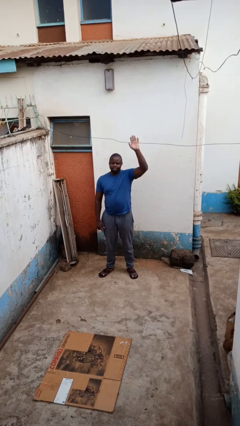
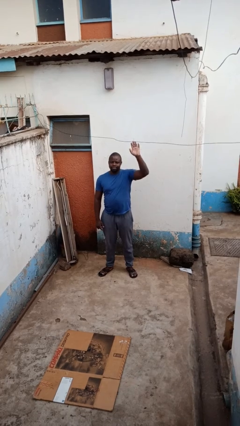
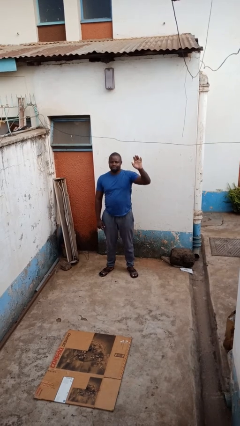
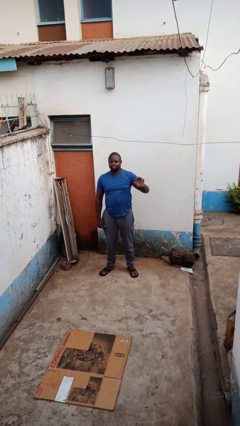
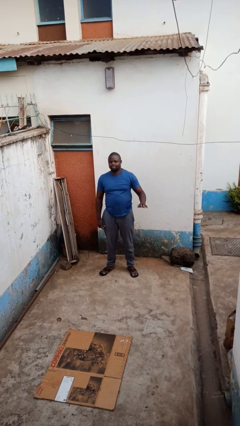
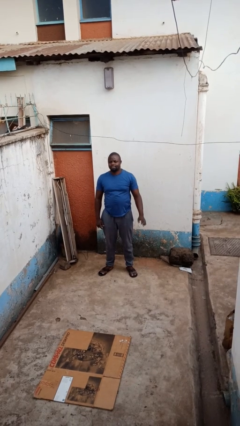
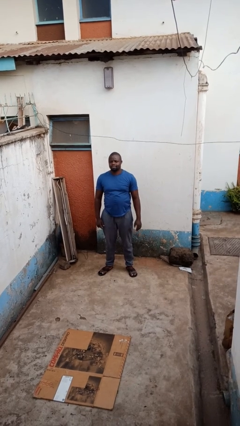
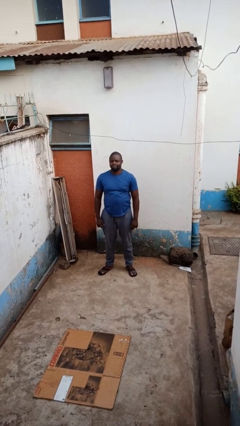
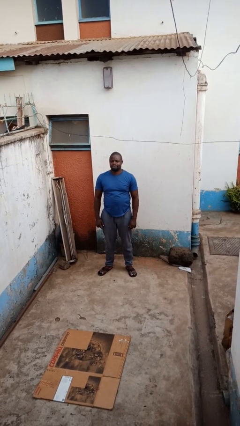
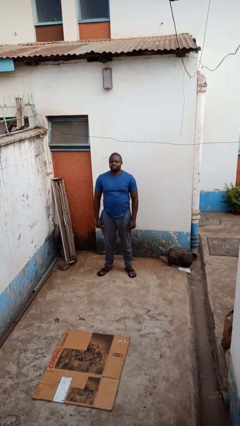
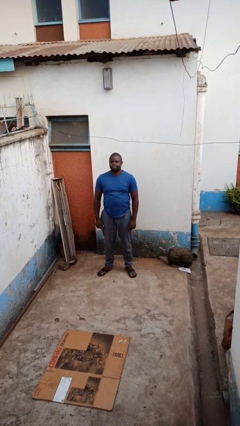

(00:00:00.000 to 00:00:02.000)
person gestures lower hand

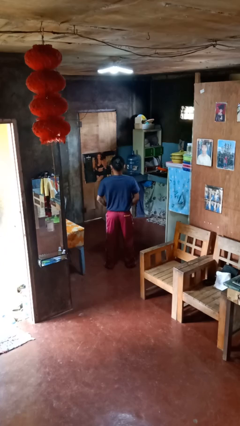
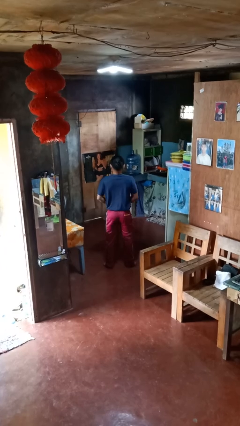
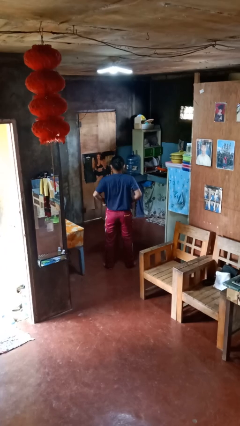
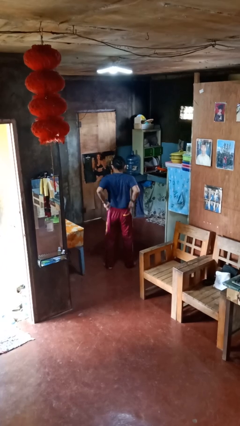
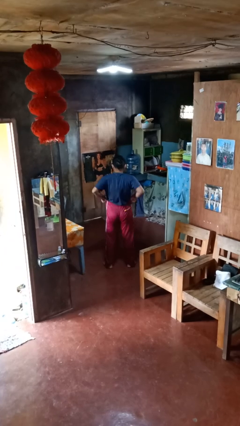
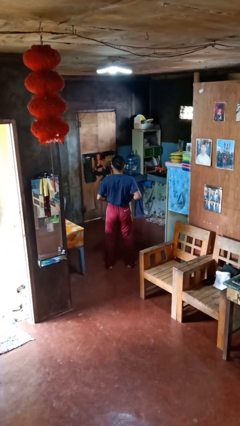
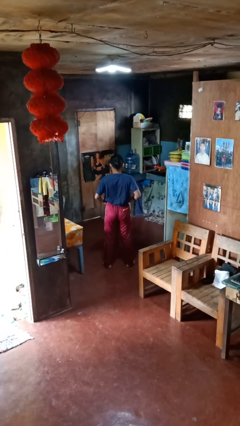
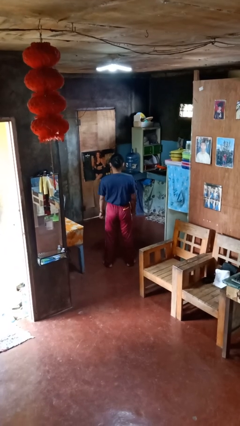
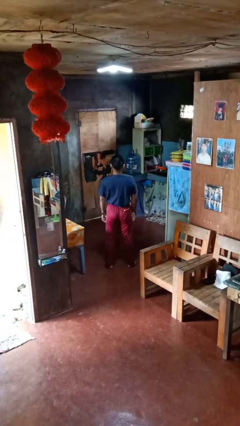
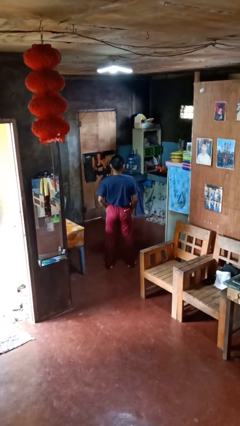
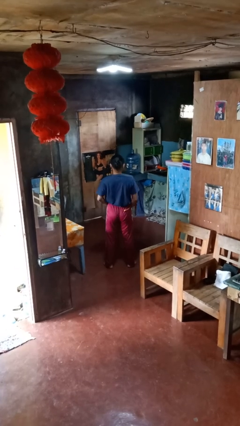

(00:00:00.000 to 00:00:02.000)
person hikes up pants

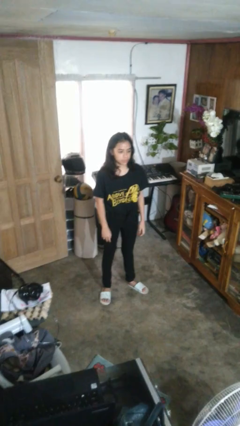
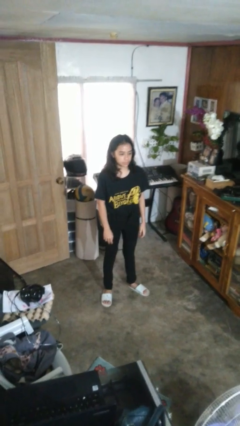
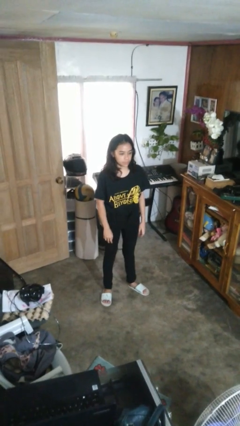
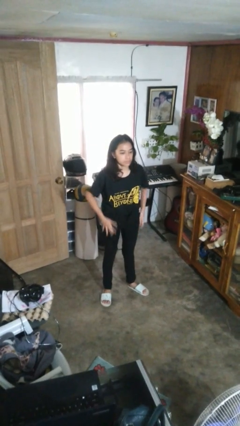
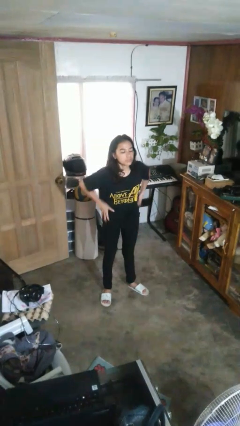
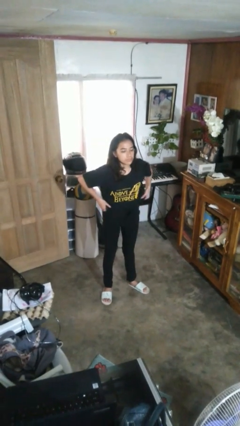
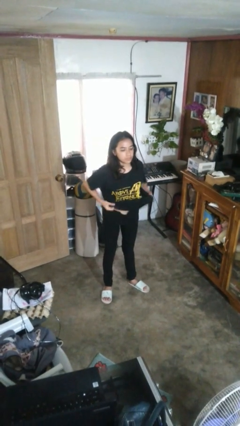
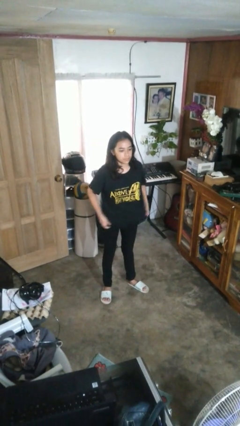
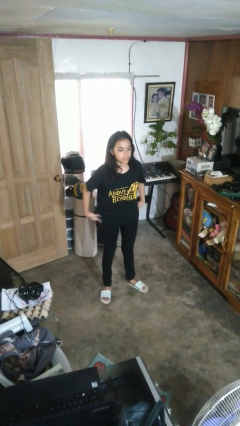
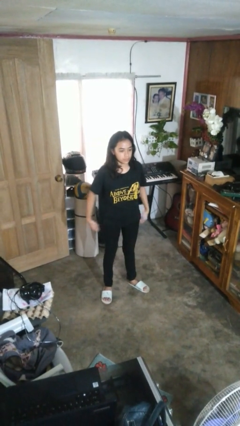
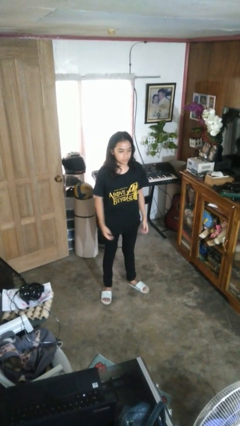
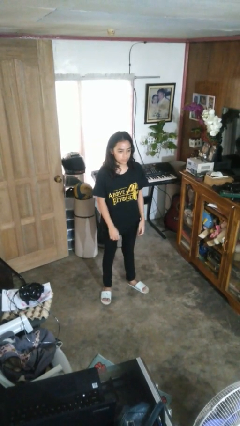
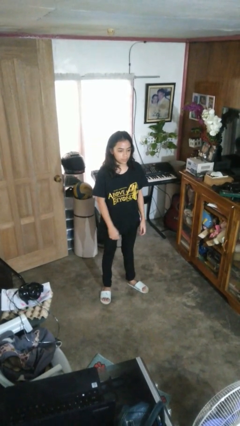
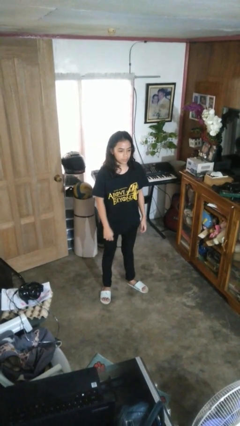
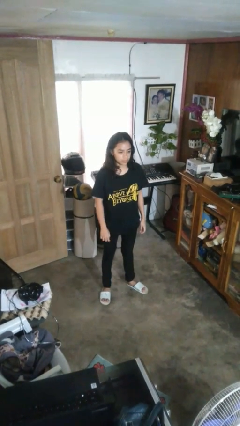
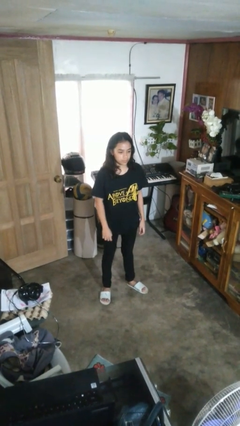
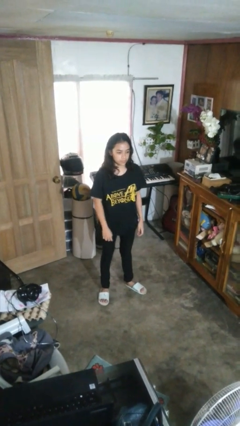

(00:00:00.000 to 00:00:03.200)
person untucks shirt

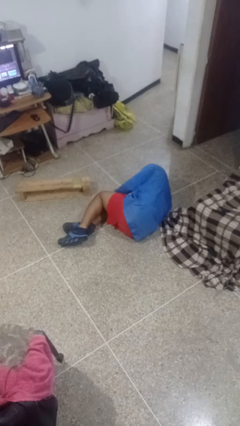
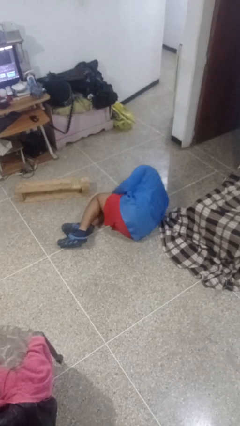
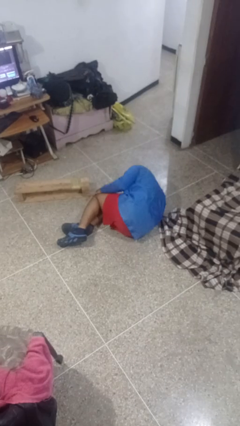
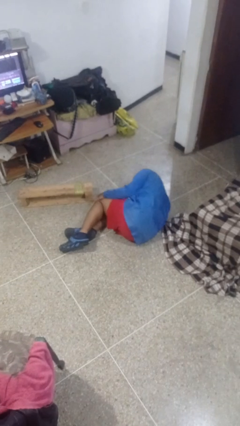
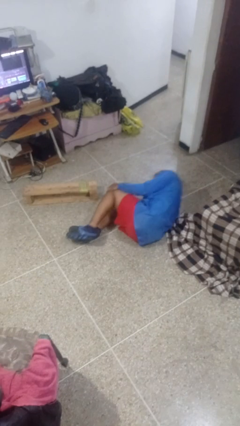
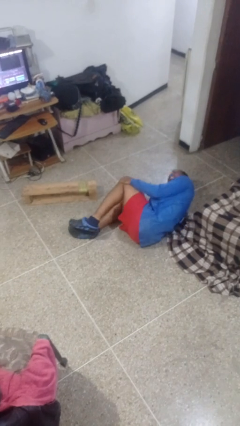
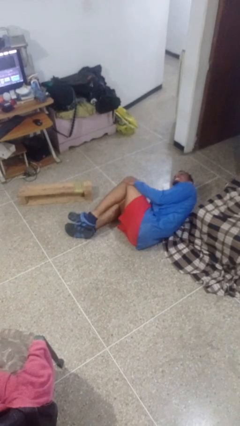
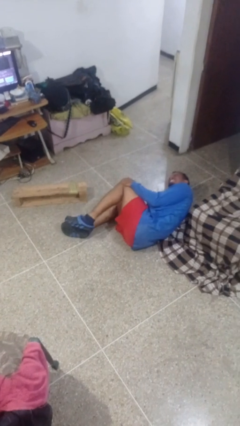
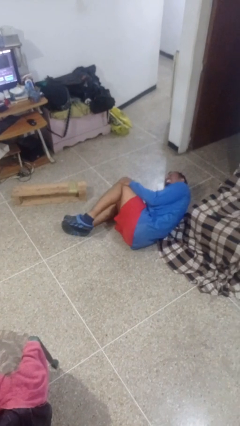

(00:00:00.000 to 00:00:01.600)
person lies down on floor

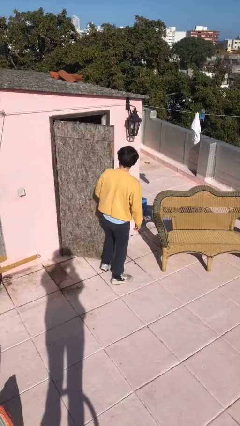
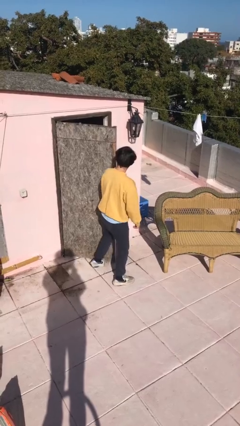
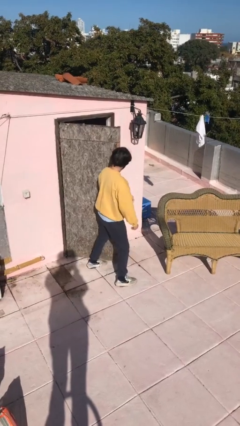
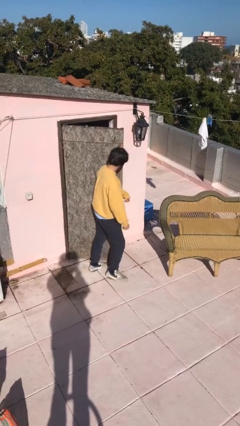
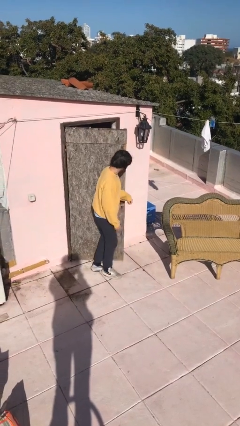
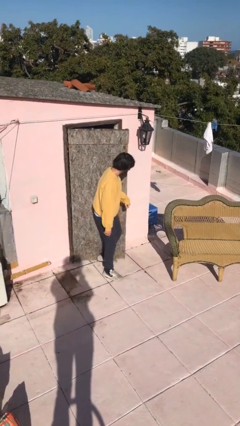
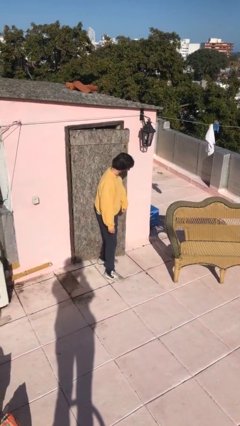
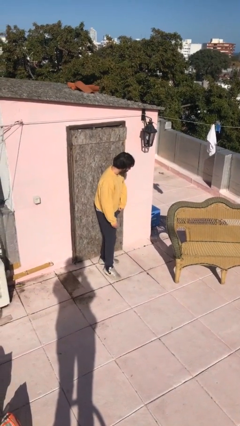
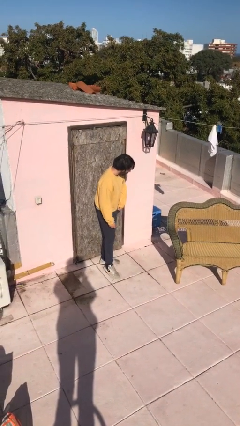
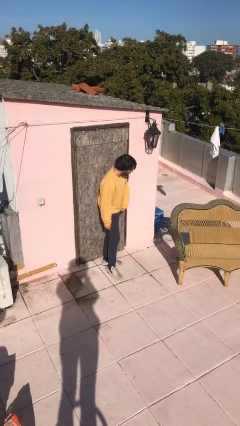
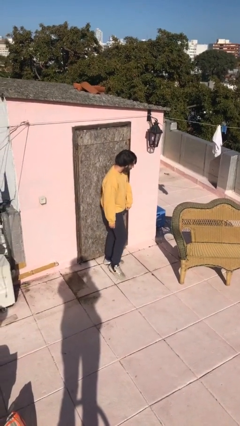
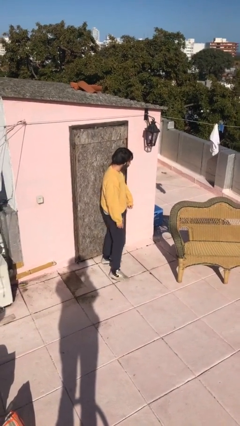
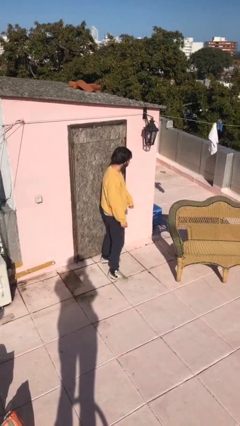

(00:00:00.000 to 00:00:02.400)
person closes door with hip

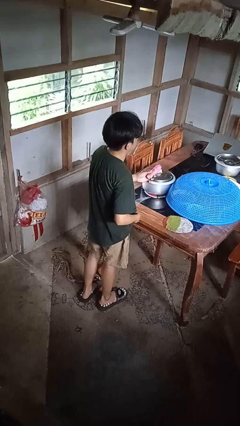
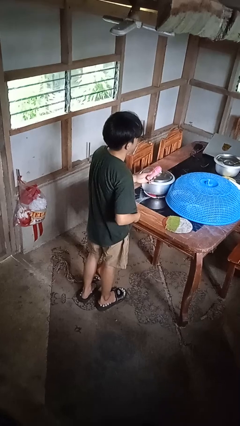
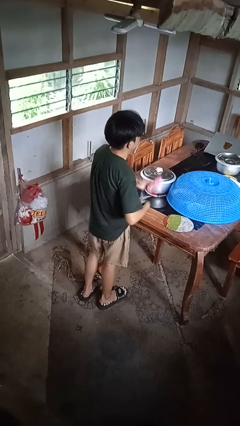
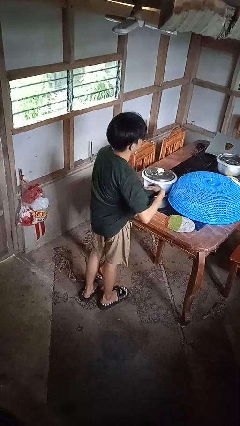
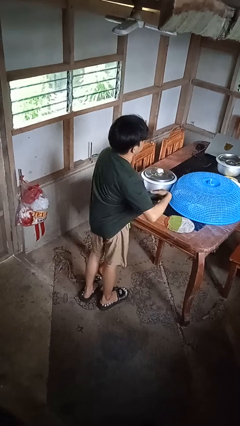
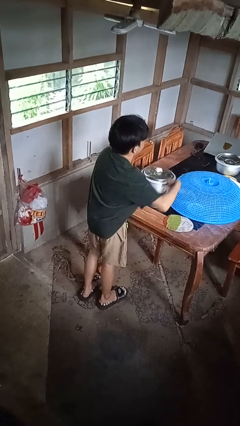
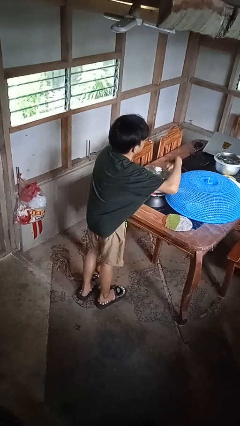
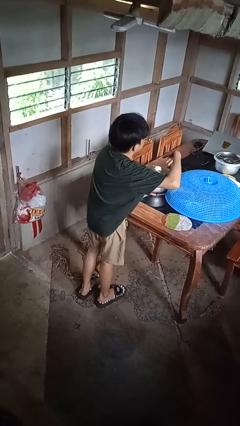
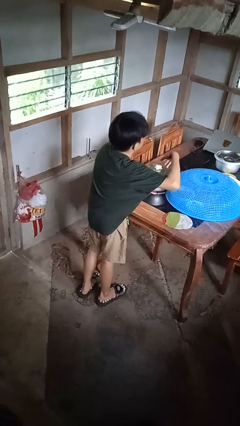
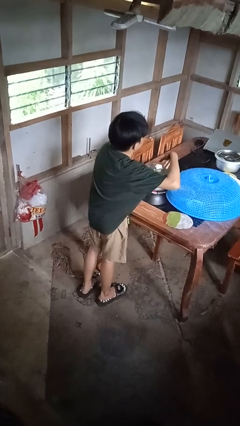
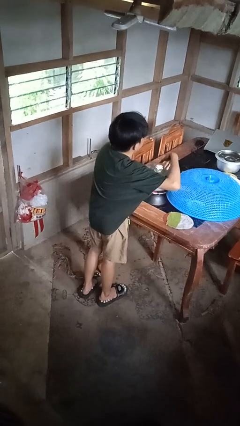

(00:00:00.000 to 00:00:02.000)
person applies deodorant

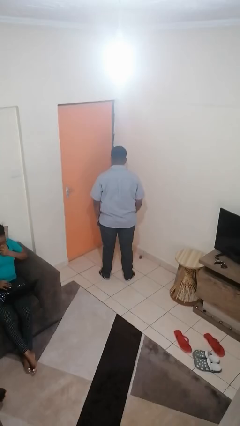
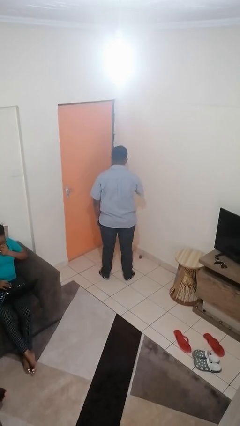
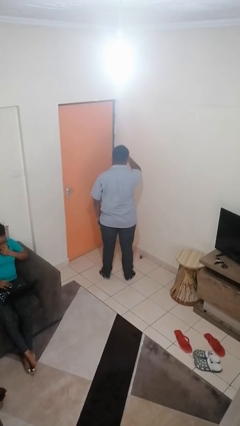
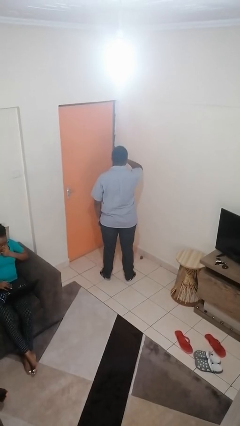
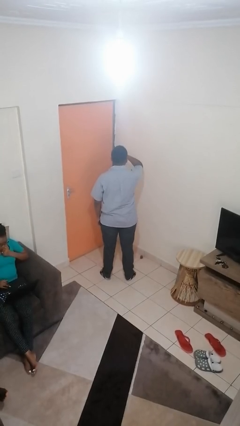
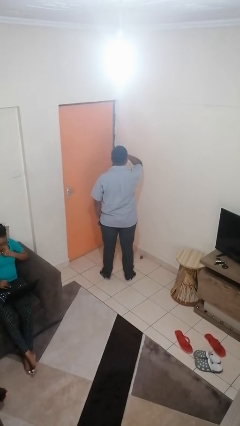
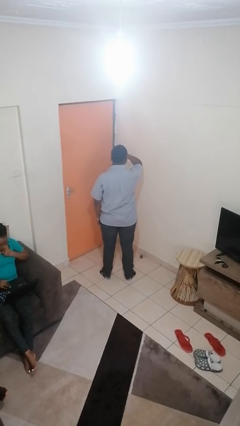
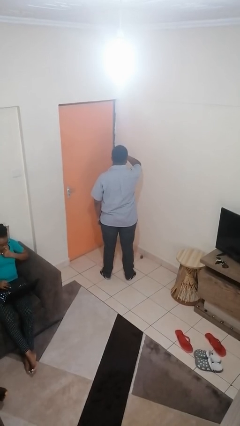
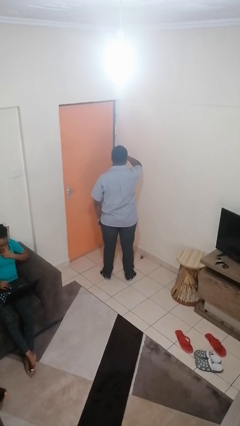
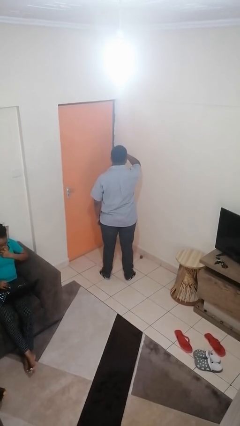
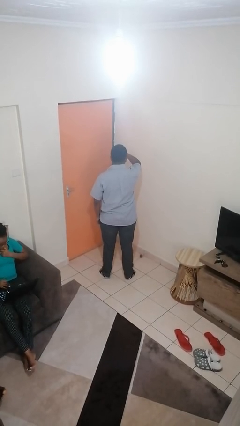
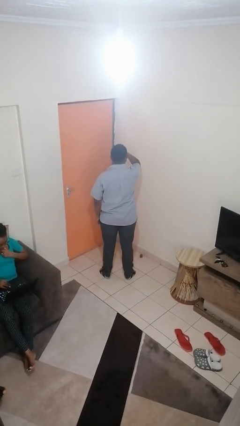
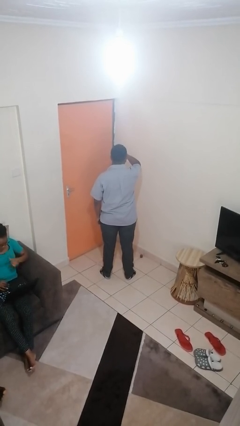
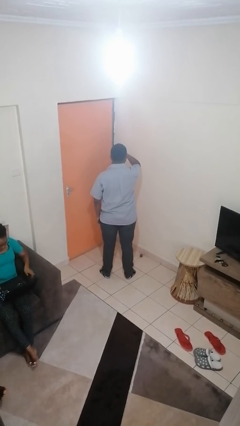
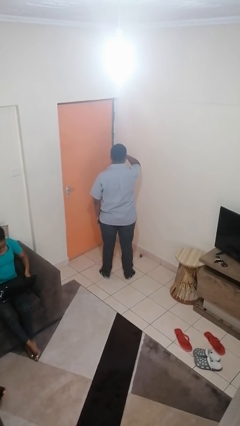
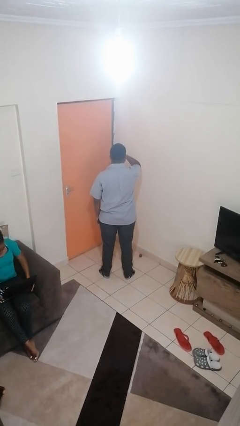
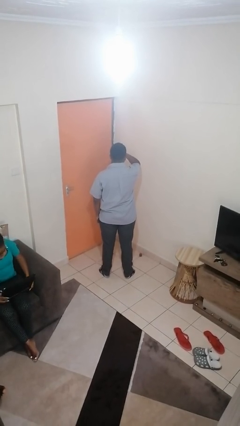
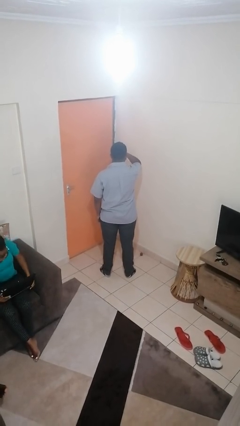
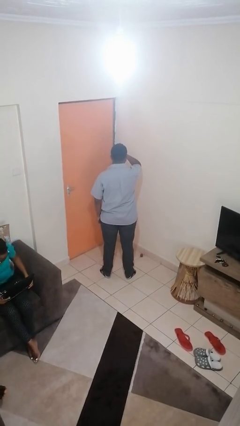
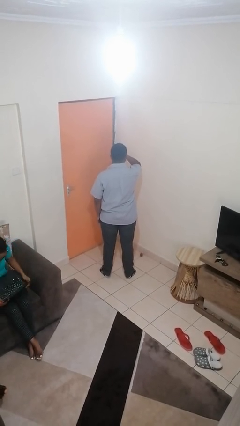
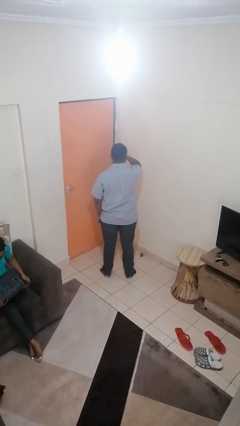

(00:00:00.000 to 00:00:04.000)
person scratches face
